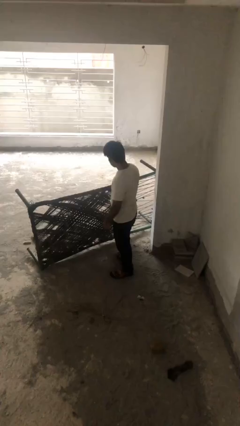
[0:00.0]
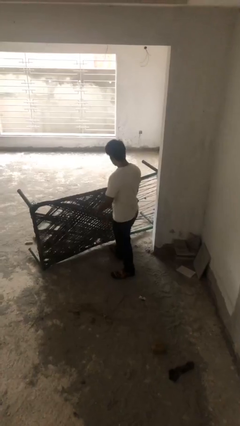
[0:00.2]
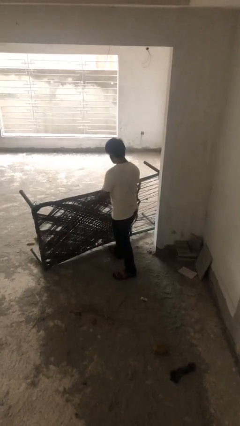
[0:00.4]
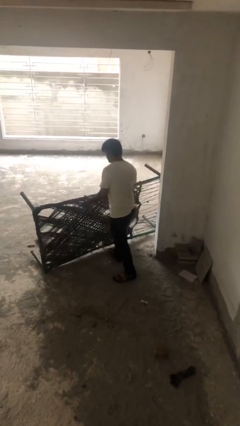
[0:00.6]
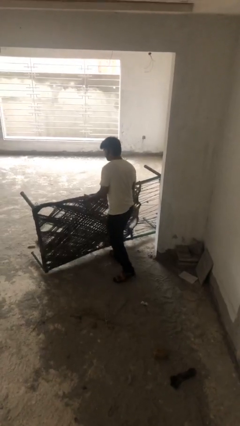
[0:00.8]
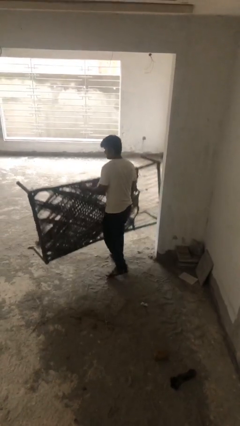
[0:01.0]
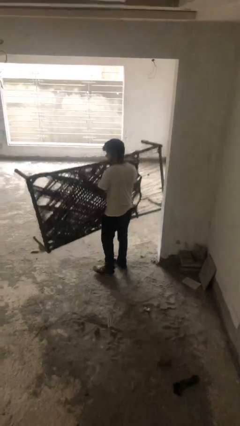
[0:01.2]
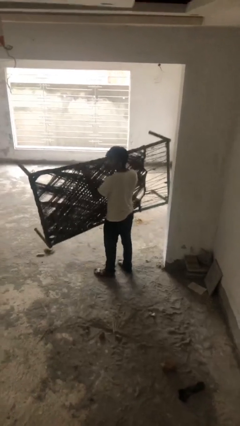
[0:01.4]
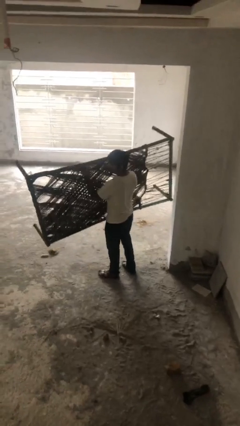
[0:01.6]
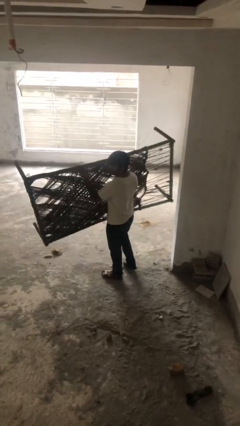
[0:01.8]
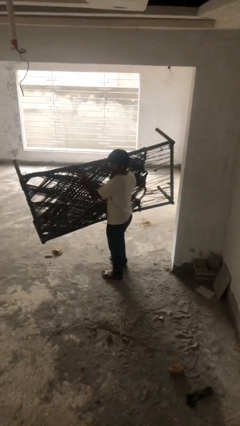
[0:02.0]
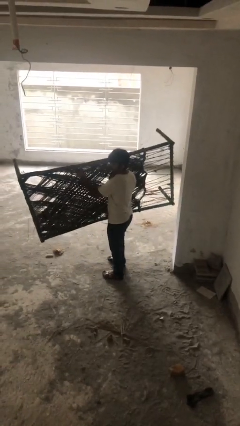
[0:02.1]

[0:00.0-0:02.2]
person picks up object from floor

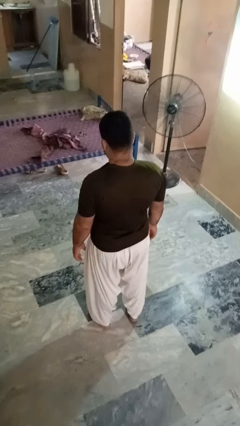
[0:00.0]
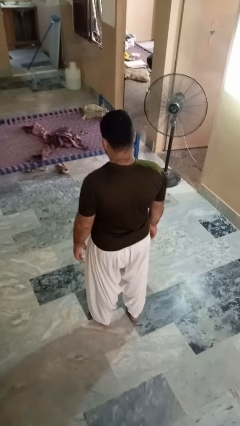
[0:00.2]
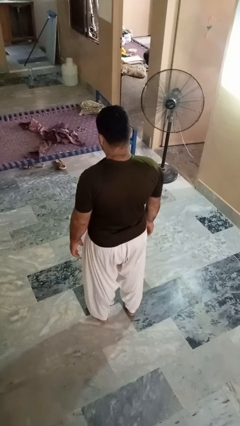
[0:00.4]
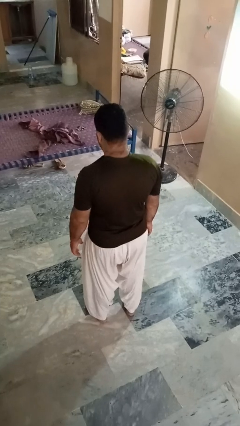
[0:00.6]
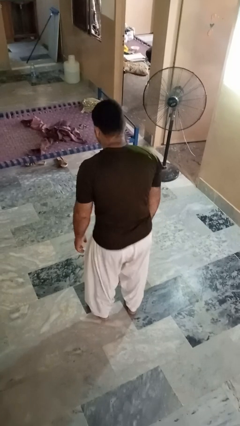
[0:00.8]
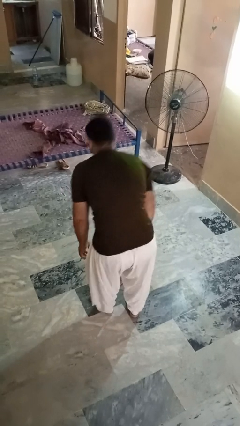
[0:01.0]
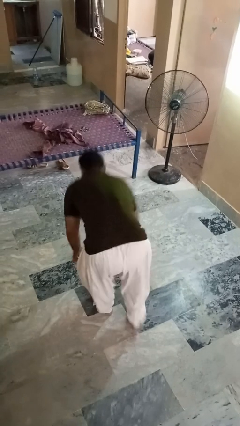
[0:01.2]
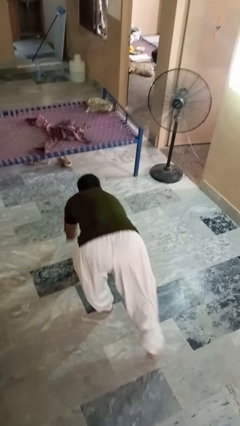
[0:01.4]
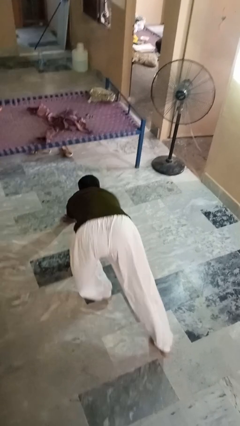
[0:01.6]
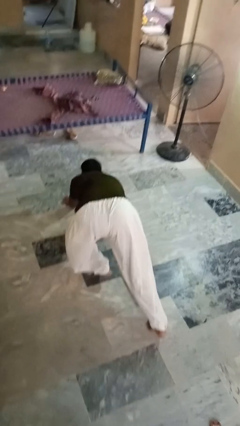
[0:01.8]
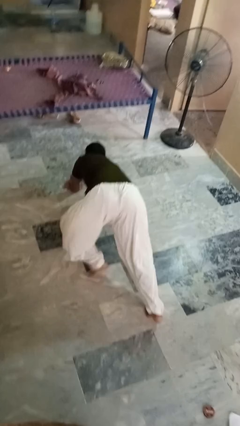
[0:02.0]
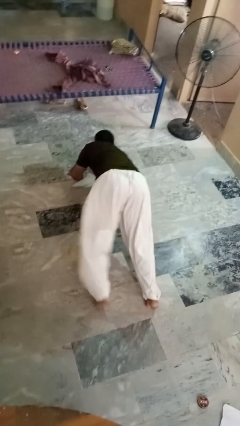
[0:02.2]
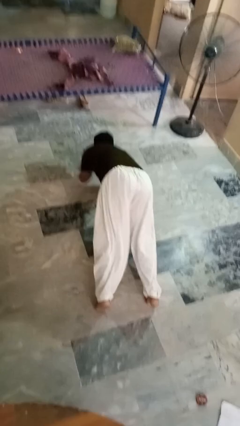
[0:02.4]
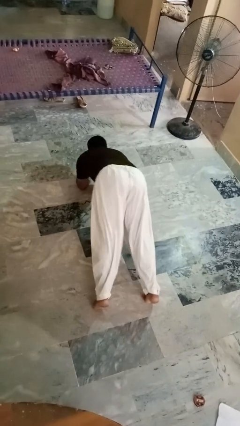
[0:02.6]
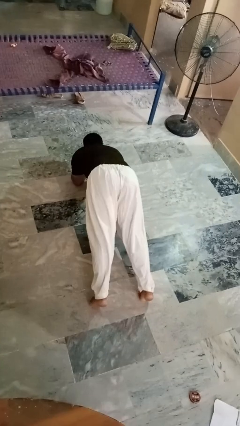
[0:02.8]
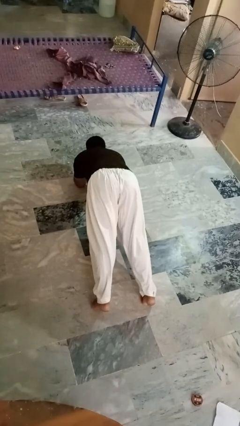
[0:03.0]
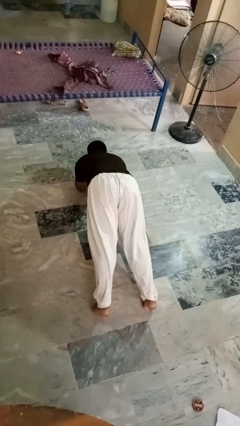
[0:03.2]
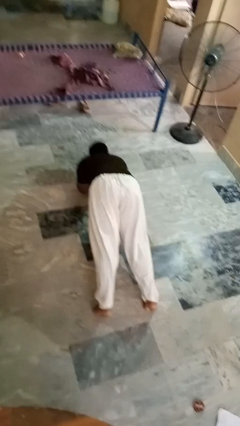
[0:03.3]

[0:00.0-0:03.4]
person exercises with plank

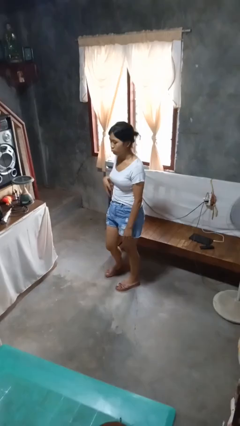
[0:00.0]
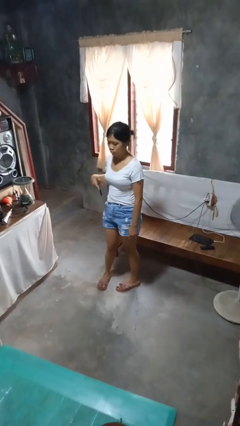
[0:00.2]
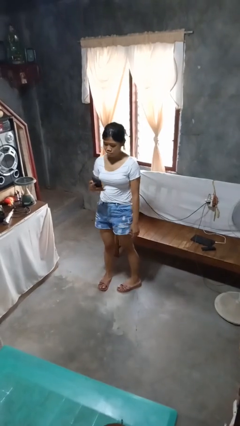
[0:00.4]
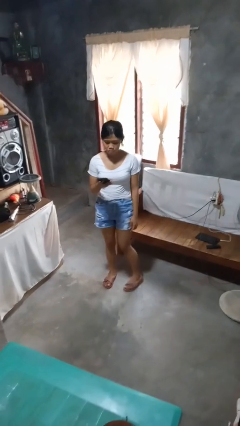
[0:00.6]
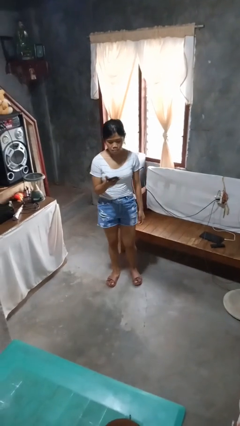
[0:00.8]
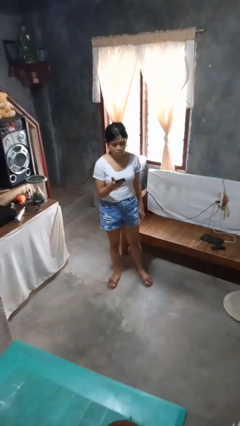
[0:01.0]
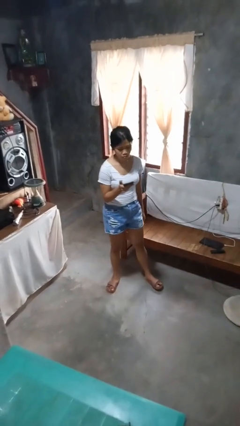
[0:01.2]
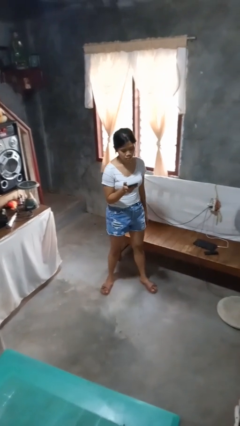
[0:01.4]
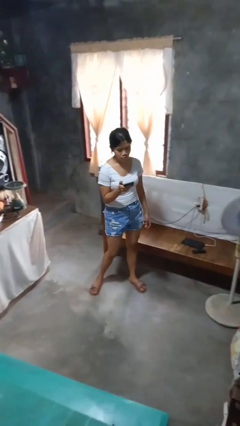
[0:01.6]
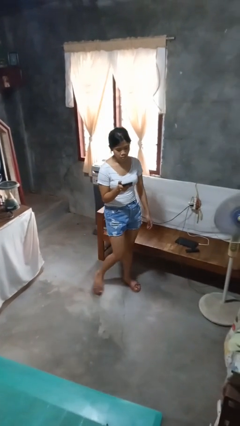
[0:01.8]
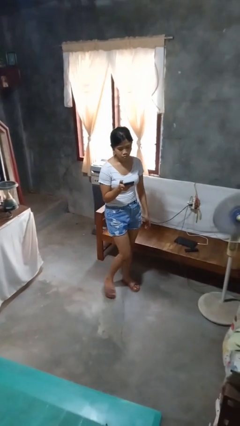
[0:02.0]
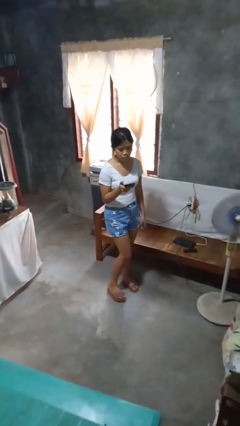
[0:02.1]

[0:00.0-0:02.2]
person takes phone from pocket

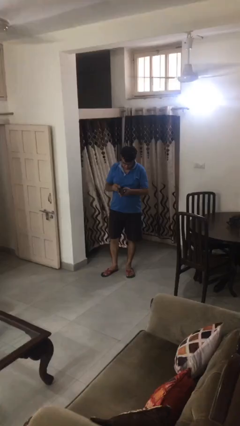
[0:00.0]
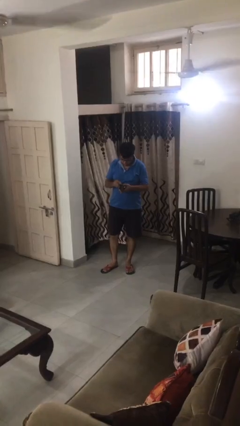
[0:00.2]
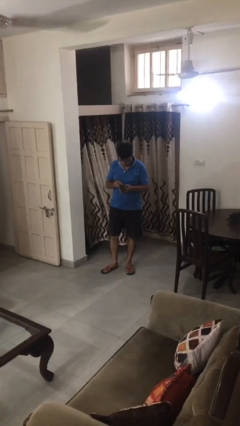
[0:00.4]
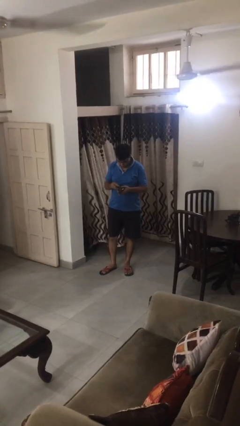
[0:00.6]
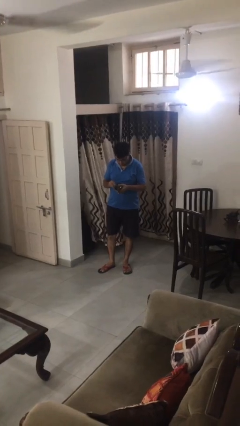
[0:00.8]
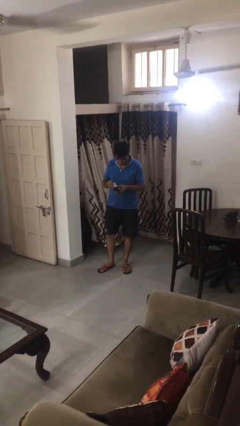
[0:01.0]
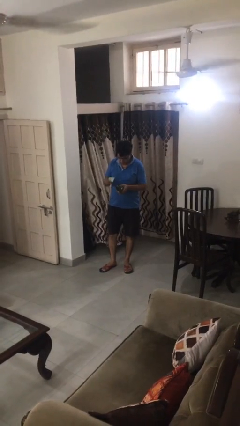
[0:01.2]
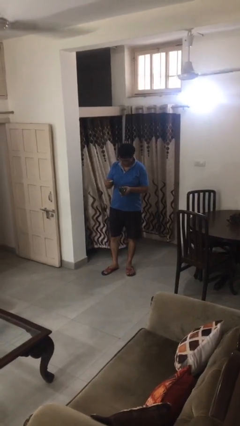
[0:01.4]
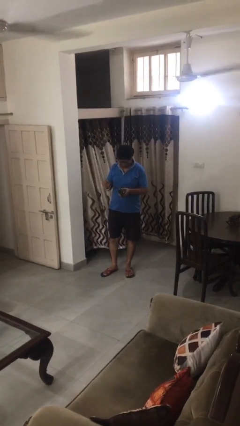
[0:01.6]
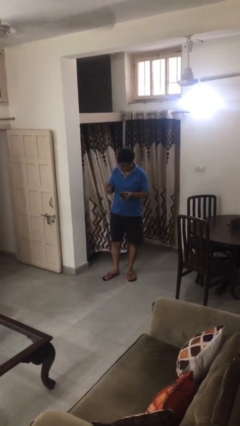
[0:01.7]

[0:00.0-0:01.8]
person takes object from purse

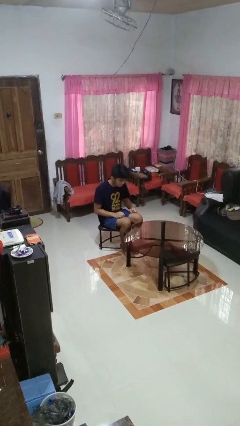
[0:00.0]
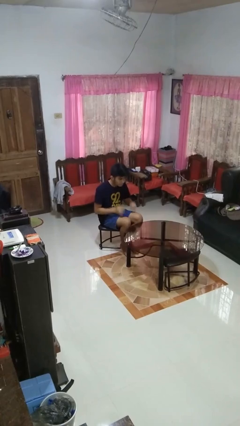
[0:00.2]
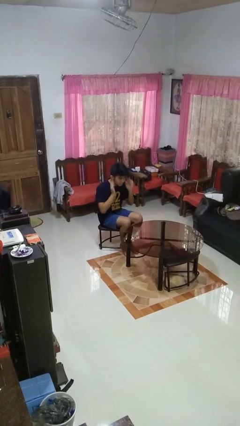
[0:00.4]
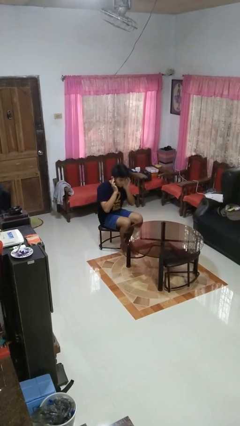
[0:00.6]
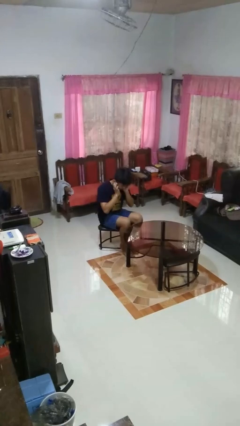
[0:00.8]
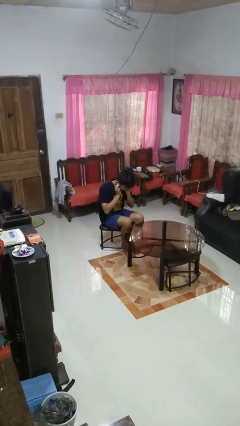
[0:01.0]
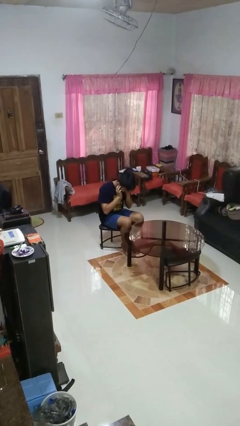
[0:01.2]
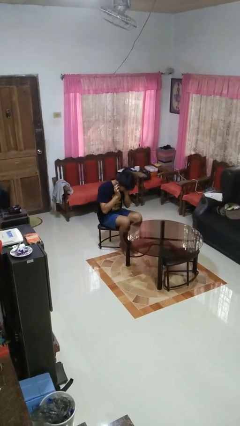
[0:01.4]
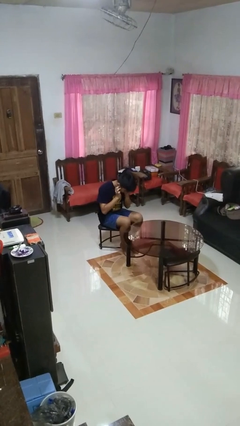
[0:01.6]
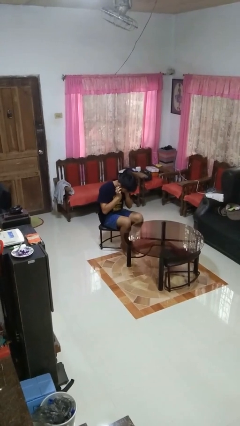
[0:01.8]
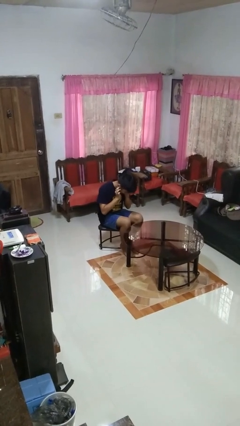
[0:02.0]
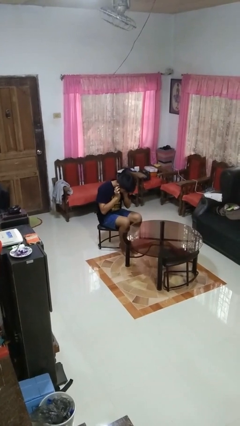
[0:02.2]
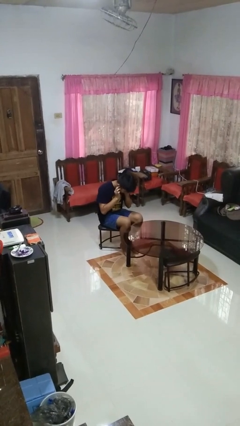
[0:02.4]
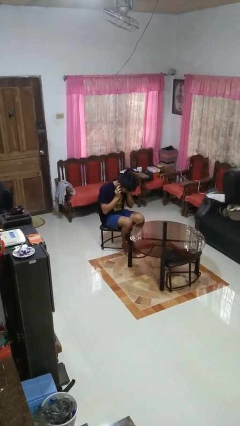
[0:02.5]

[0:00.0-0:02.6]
person puts fingers in ear

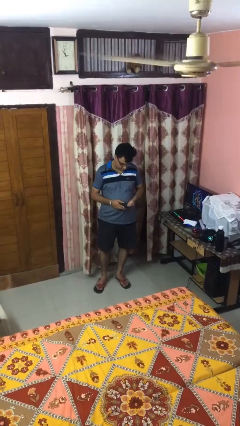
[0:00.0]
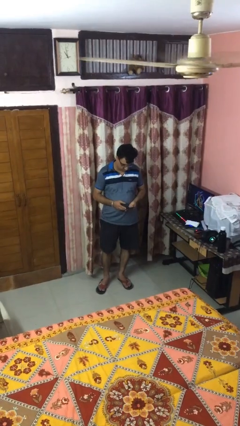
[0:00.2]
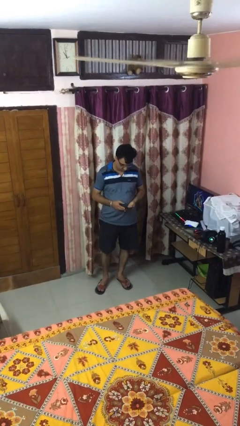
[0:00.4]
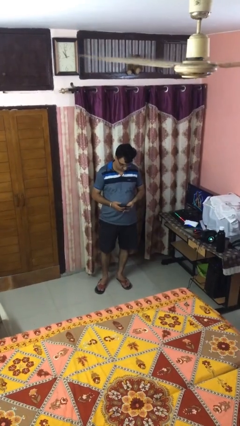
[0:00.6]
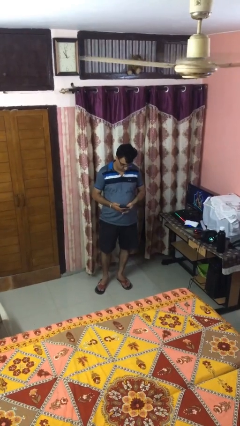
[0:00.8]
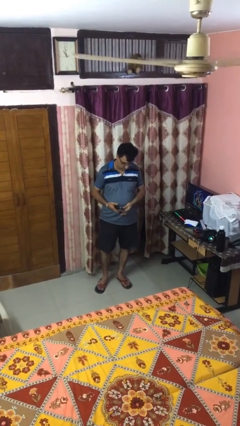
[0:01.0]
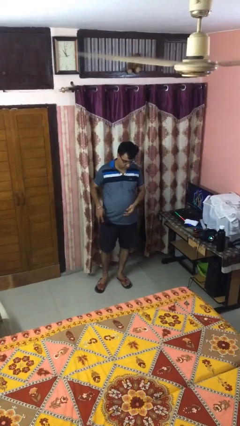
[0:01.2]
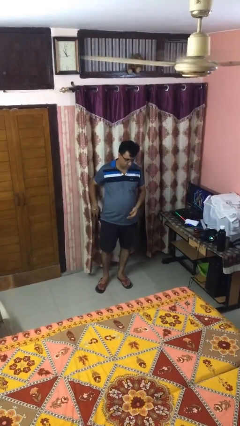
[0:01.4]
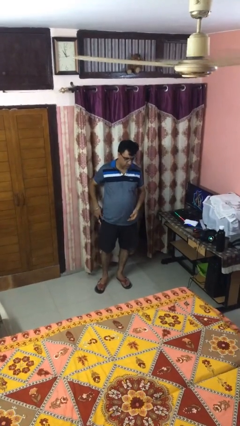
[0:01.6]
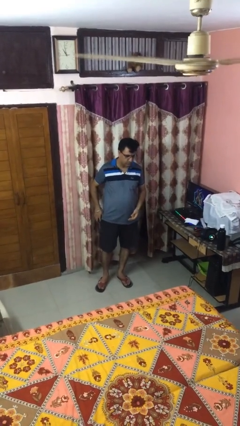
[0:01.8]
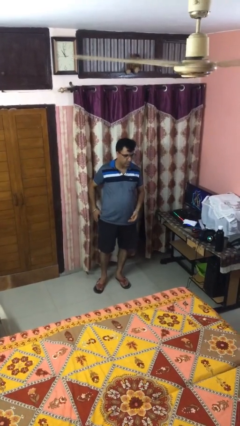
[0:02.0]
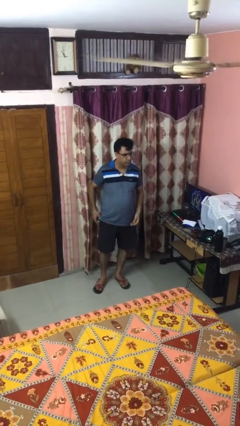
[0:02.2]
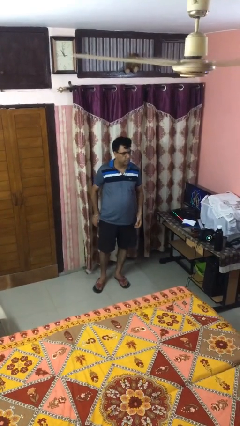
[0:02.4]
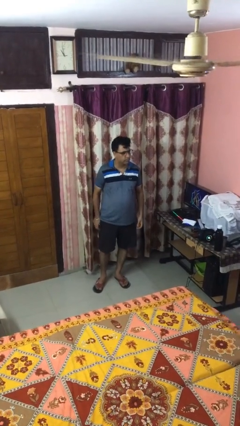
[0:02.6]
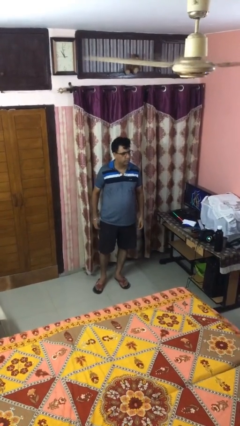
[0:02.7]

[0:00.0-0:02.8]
person puts phone into pocket

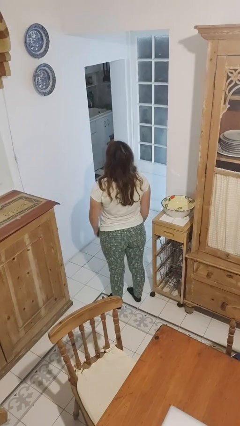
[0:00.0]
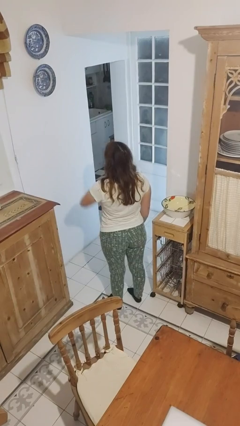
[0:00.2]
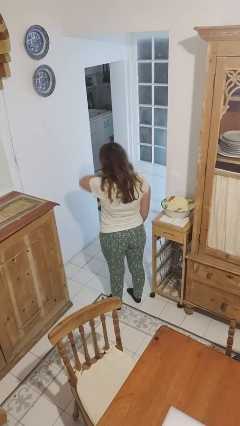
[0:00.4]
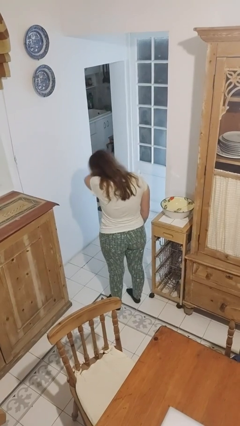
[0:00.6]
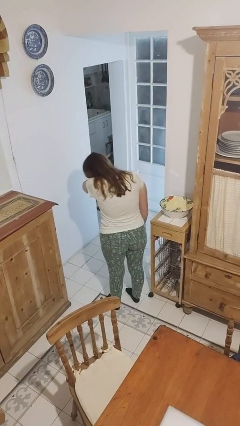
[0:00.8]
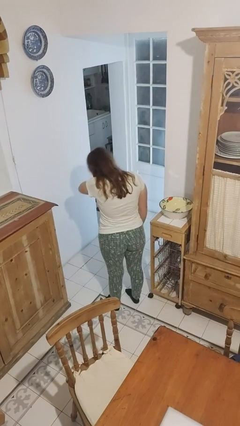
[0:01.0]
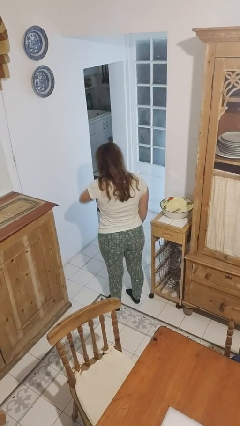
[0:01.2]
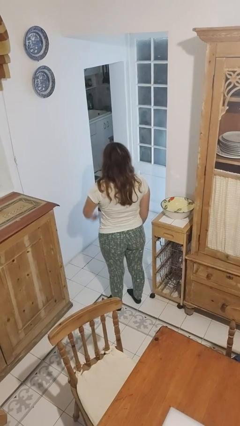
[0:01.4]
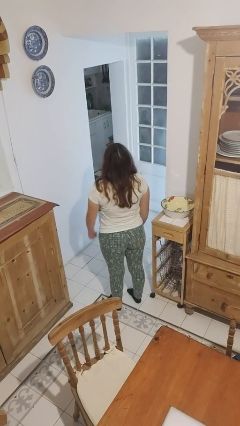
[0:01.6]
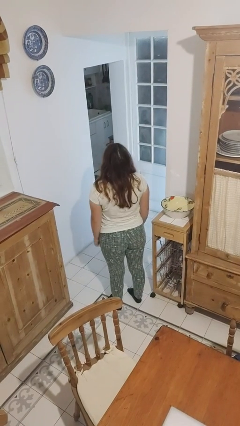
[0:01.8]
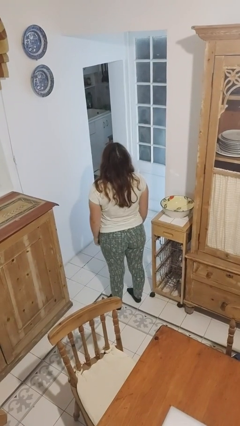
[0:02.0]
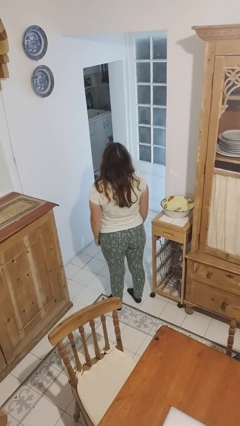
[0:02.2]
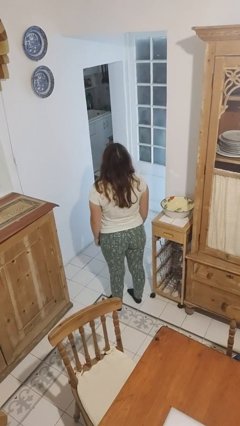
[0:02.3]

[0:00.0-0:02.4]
person sneezes into arm
